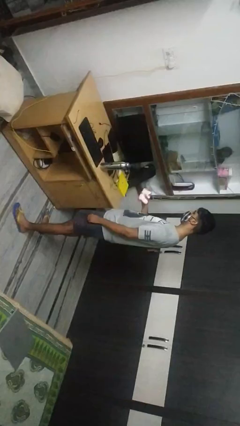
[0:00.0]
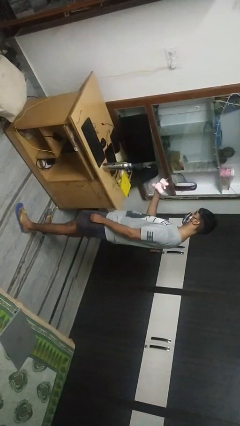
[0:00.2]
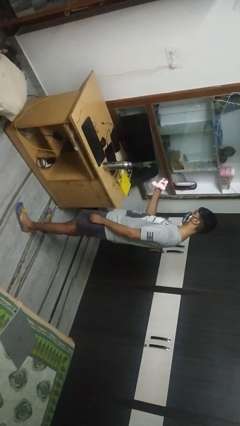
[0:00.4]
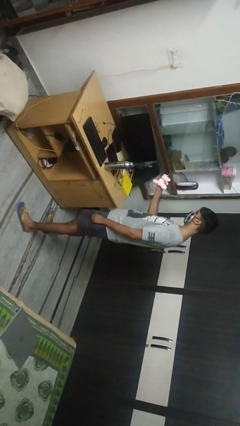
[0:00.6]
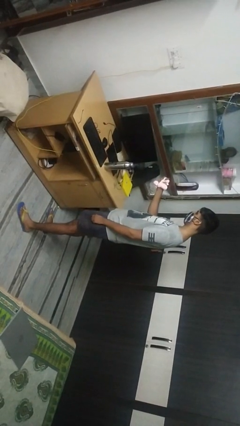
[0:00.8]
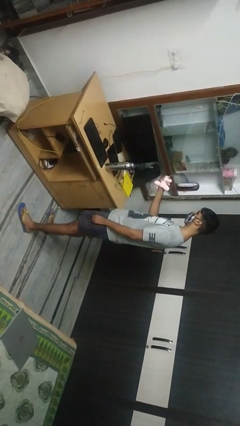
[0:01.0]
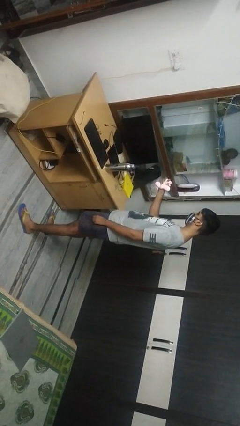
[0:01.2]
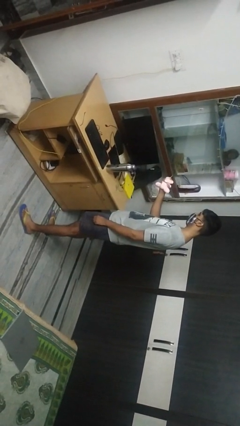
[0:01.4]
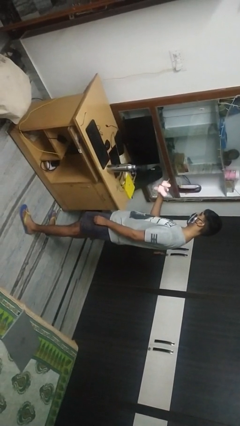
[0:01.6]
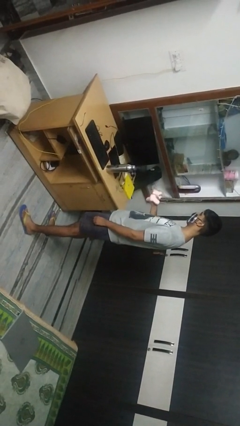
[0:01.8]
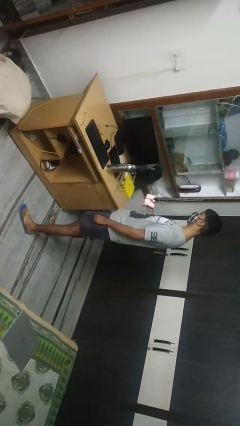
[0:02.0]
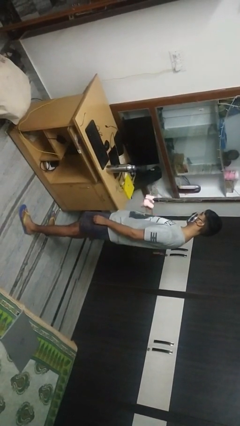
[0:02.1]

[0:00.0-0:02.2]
person squeezes object

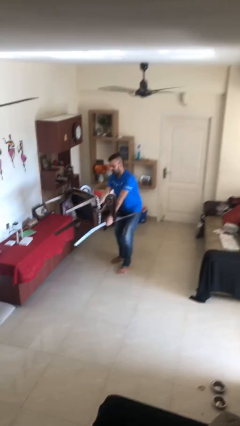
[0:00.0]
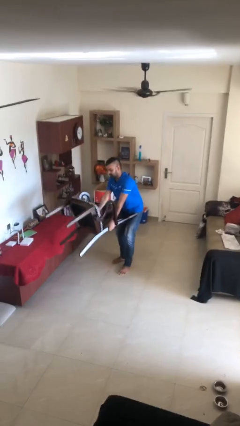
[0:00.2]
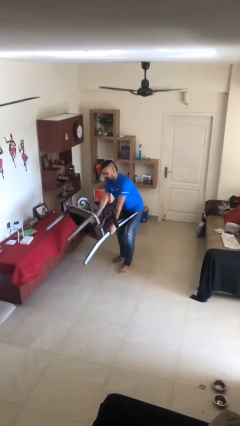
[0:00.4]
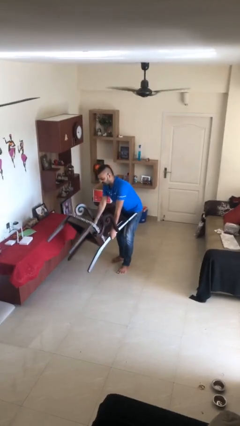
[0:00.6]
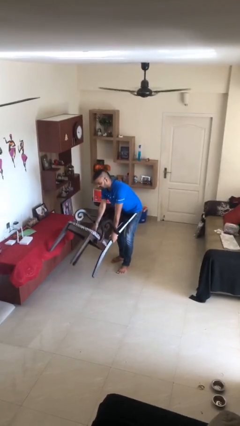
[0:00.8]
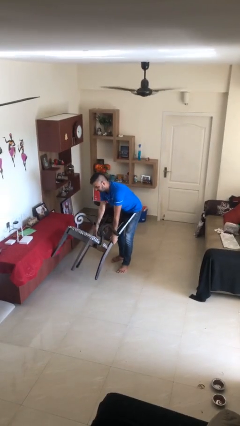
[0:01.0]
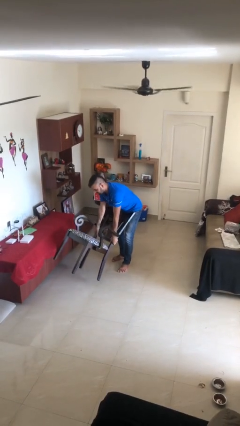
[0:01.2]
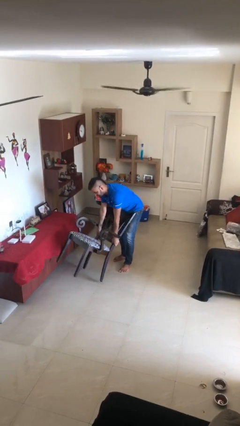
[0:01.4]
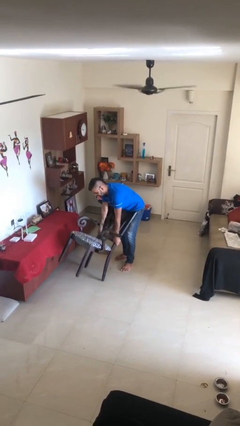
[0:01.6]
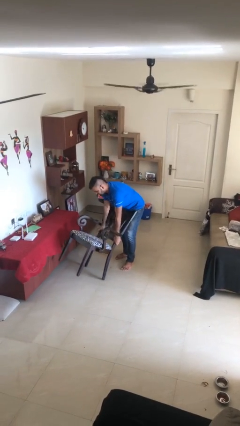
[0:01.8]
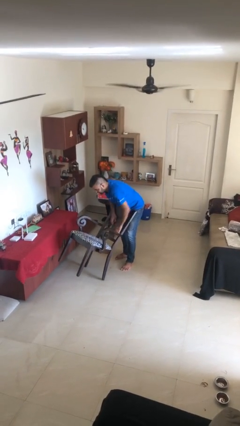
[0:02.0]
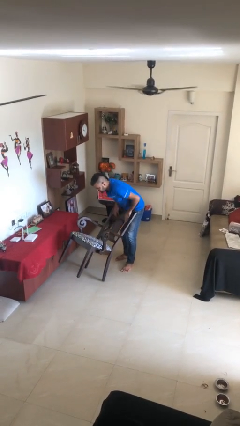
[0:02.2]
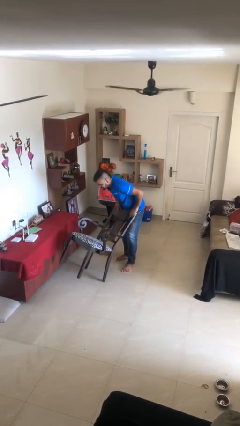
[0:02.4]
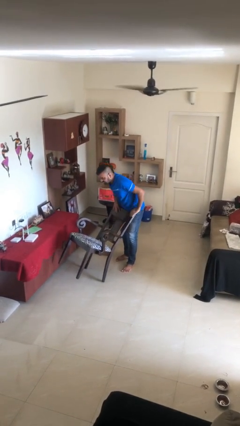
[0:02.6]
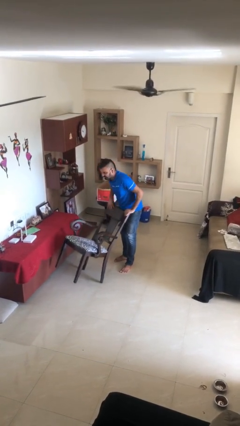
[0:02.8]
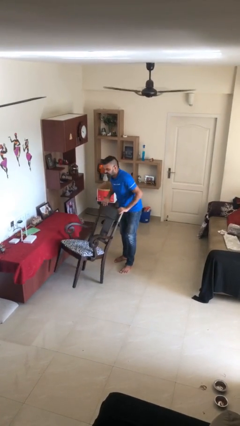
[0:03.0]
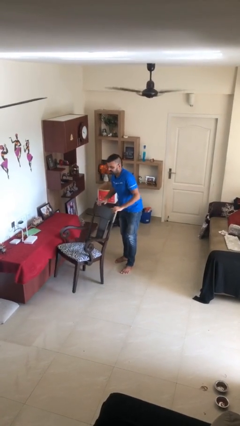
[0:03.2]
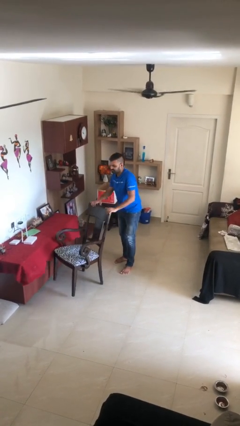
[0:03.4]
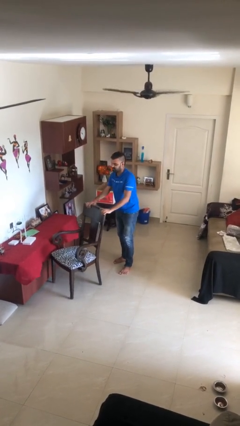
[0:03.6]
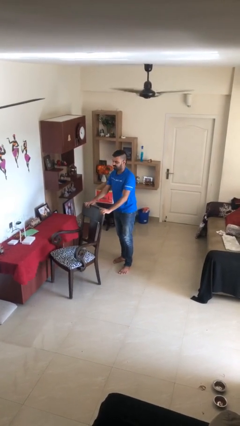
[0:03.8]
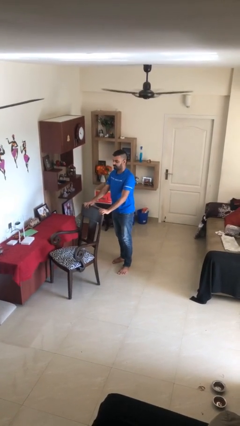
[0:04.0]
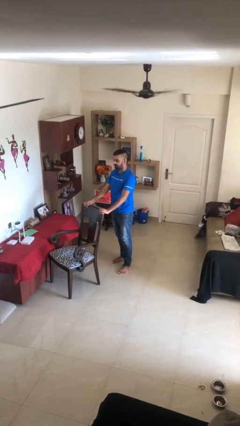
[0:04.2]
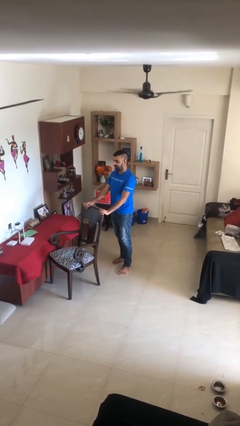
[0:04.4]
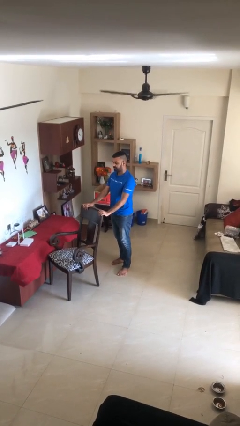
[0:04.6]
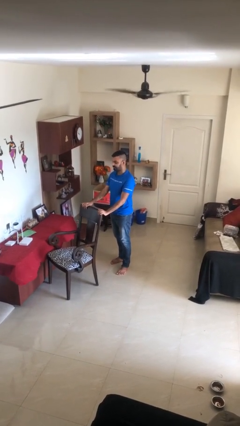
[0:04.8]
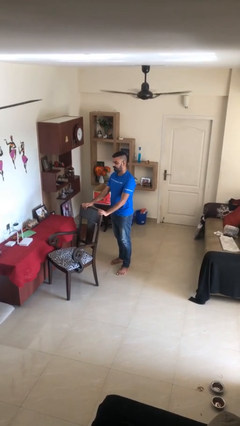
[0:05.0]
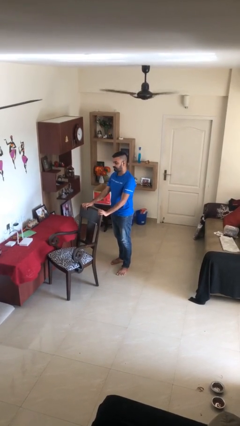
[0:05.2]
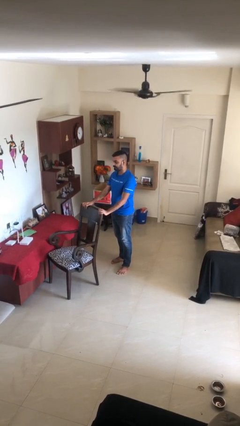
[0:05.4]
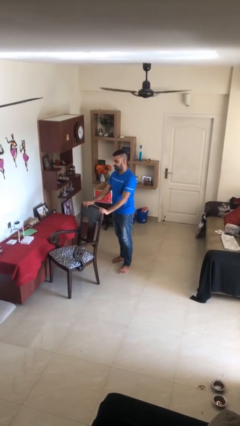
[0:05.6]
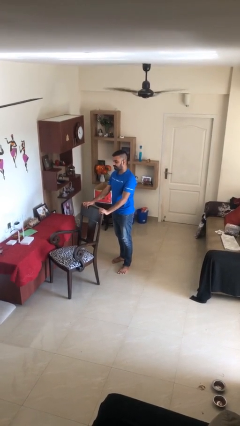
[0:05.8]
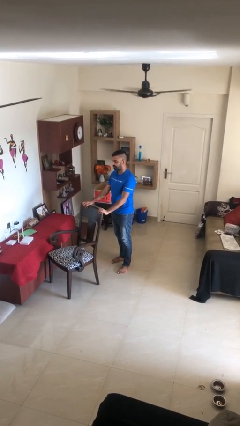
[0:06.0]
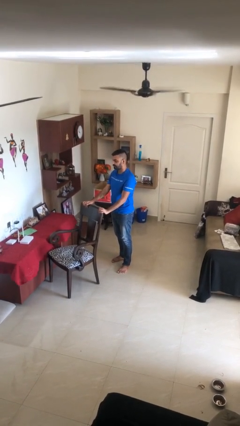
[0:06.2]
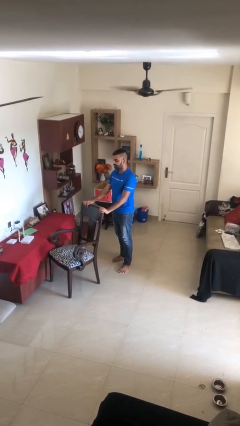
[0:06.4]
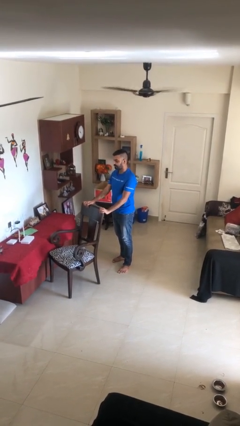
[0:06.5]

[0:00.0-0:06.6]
person puts down object on floor

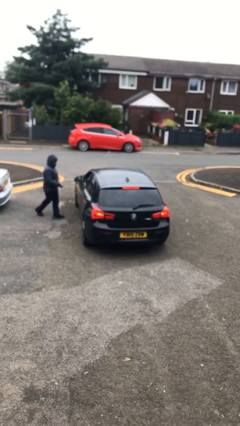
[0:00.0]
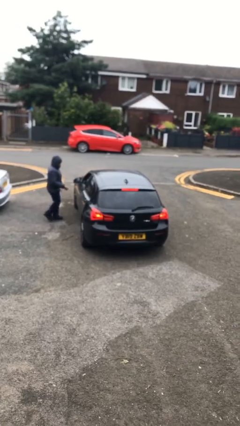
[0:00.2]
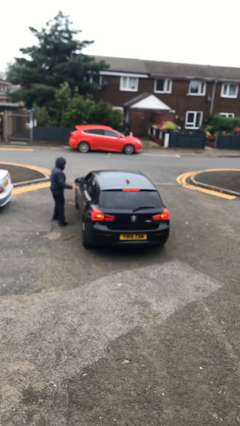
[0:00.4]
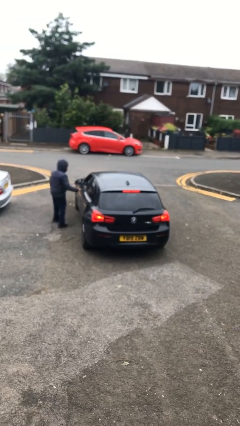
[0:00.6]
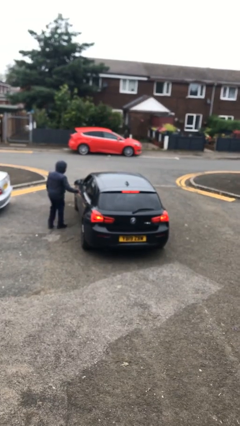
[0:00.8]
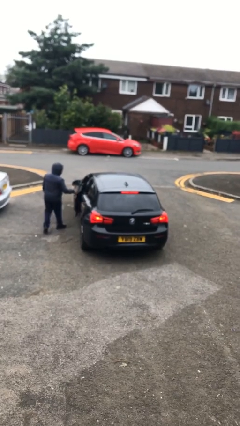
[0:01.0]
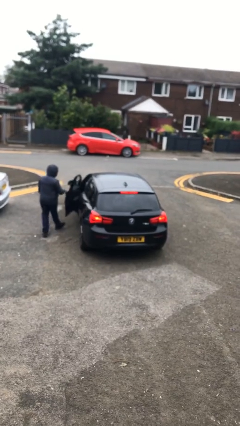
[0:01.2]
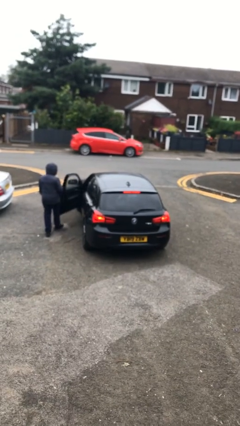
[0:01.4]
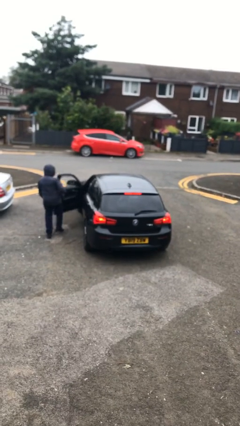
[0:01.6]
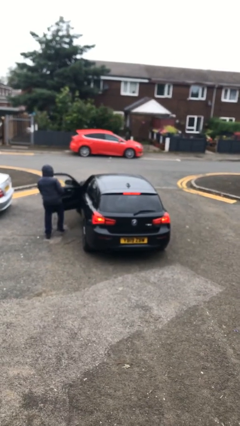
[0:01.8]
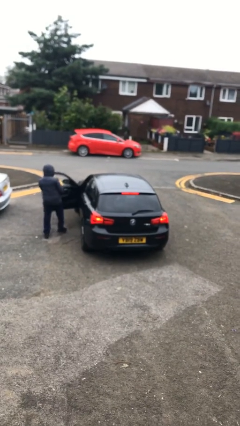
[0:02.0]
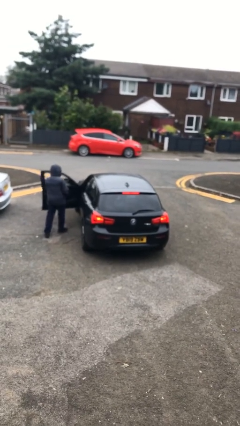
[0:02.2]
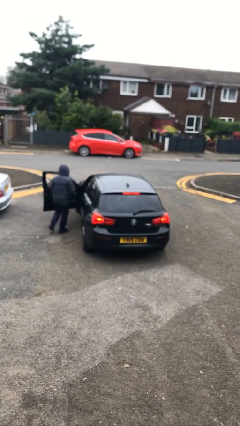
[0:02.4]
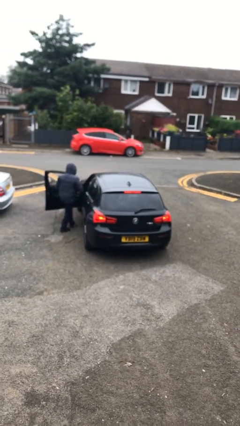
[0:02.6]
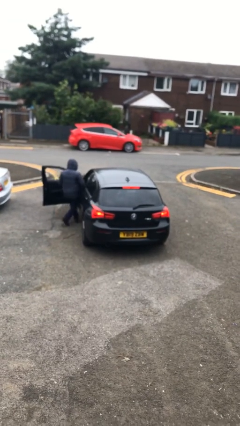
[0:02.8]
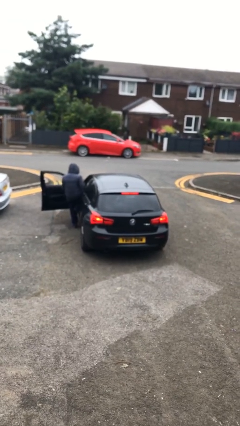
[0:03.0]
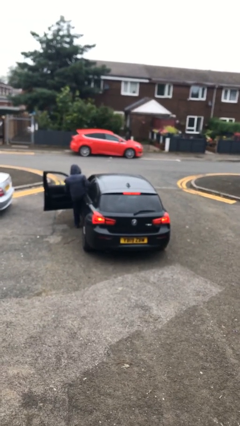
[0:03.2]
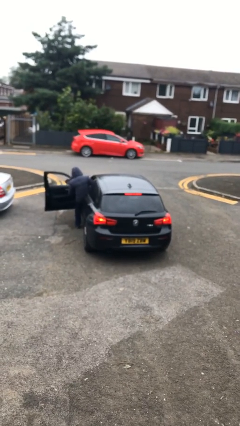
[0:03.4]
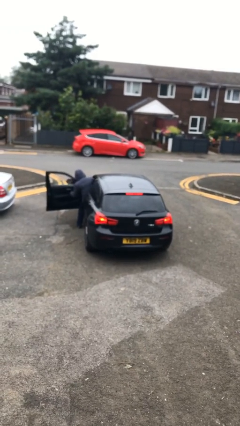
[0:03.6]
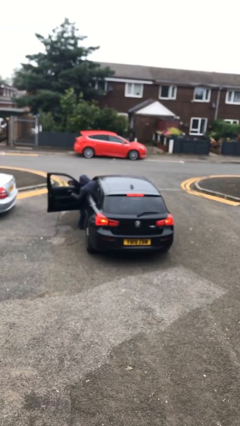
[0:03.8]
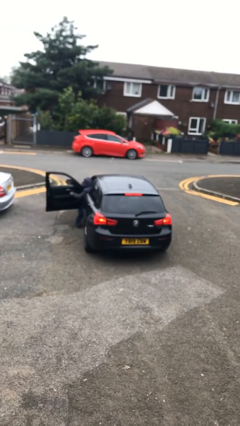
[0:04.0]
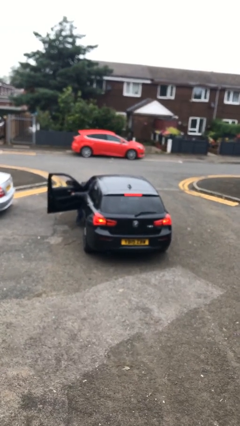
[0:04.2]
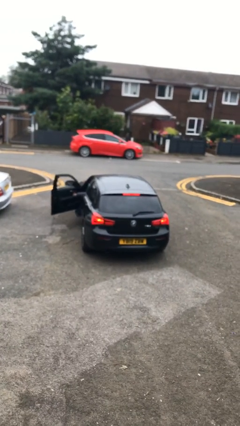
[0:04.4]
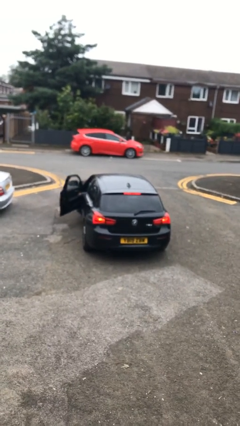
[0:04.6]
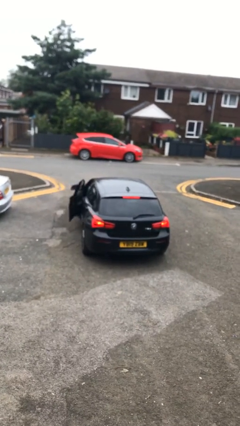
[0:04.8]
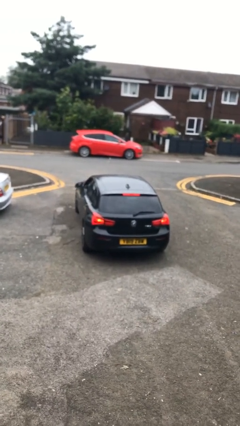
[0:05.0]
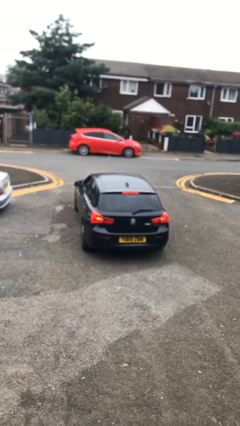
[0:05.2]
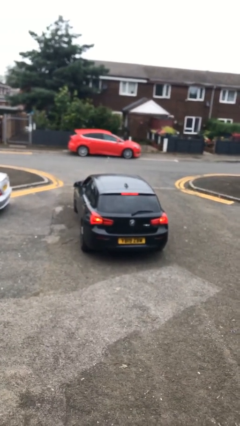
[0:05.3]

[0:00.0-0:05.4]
car picks up person

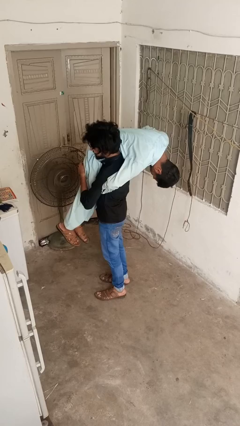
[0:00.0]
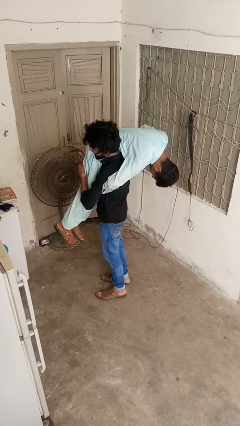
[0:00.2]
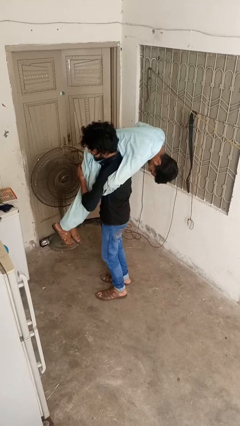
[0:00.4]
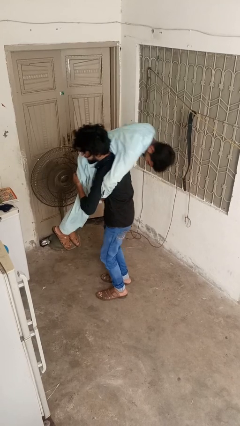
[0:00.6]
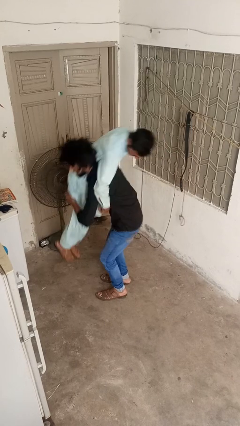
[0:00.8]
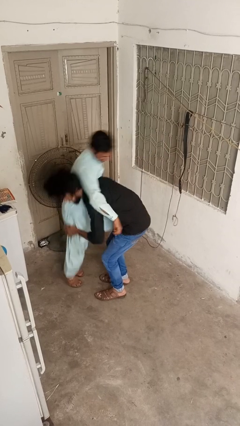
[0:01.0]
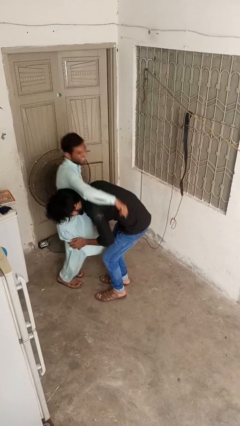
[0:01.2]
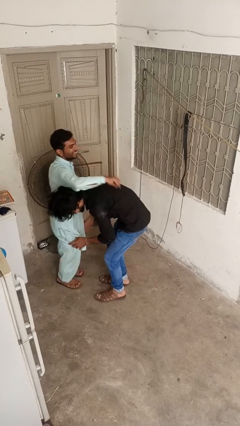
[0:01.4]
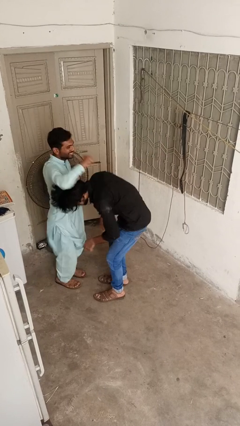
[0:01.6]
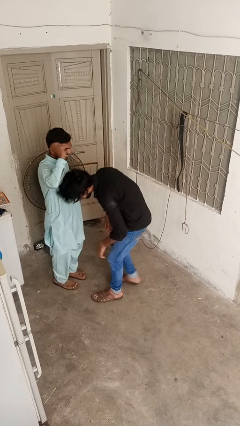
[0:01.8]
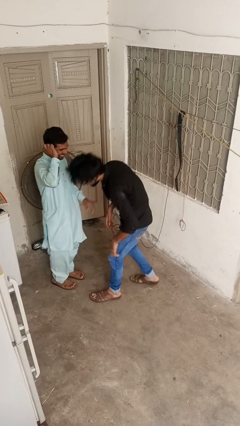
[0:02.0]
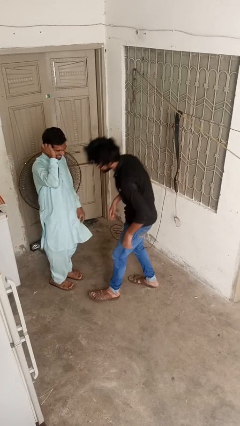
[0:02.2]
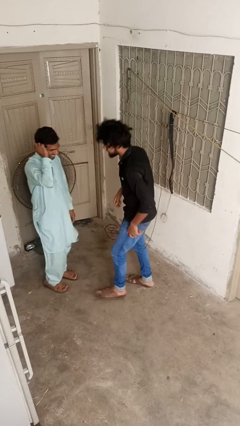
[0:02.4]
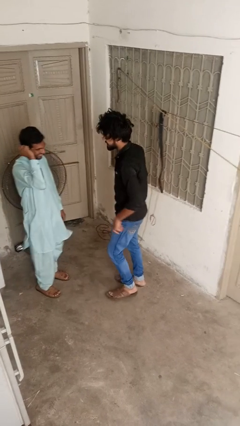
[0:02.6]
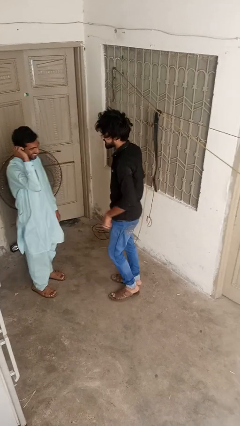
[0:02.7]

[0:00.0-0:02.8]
person puts down person

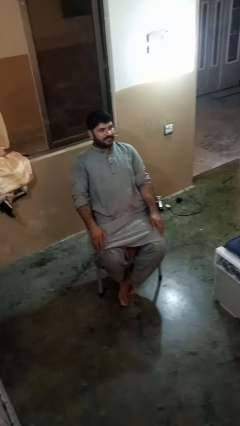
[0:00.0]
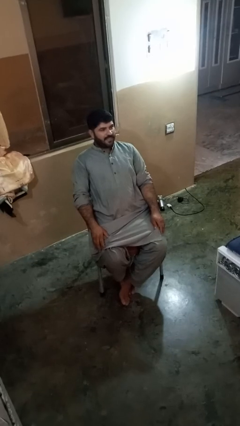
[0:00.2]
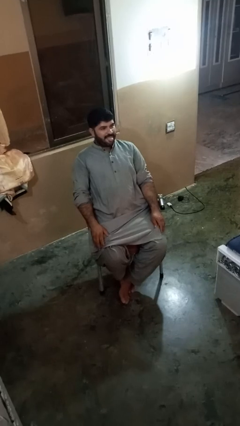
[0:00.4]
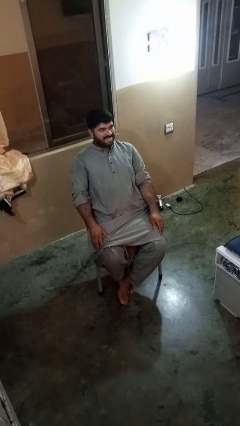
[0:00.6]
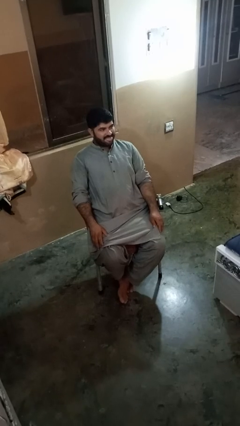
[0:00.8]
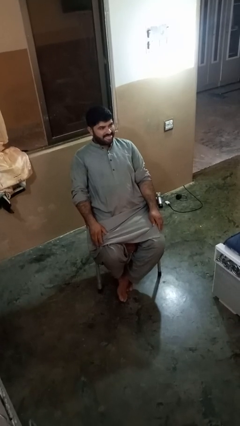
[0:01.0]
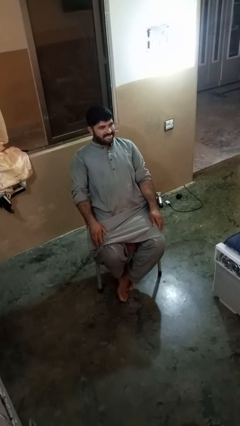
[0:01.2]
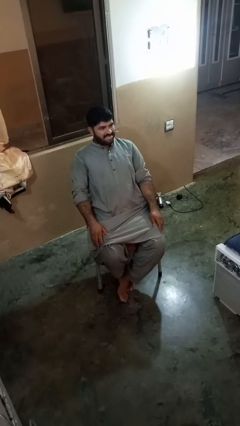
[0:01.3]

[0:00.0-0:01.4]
person sticks out tongue
